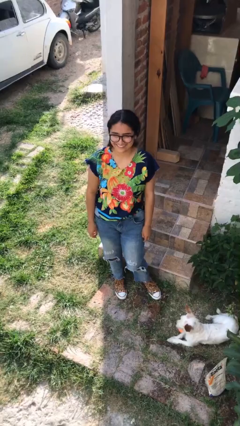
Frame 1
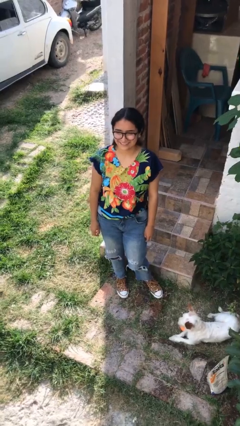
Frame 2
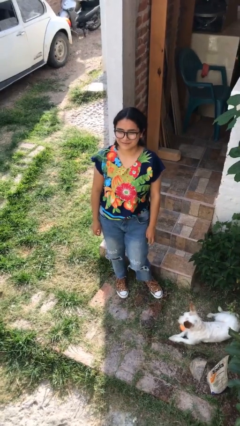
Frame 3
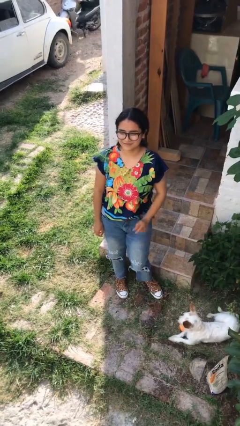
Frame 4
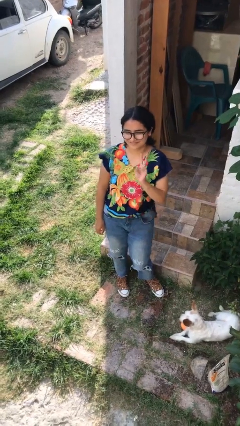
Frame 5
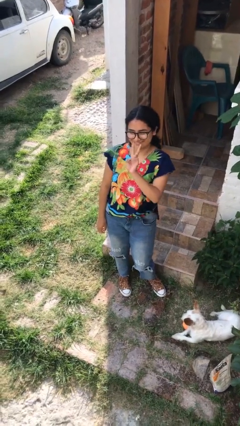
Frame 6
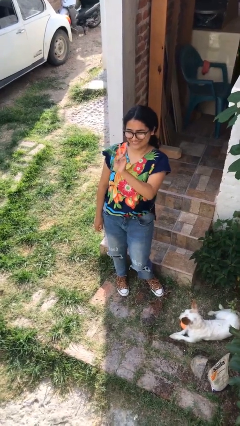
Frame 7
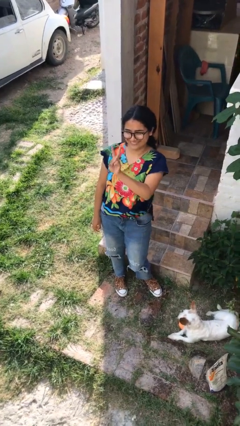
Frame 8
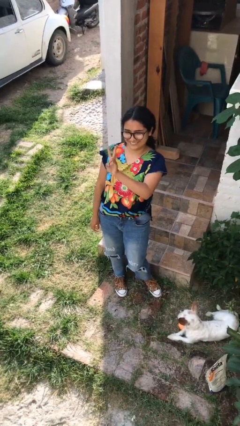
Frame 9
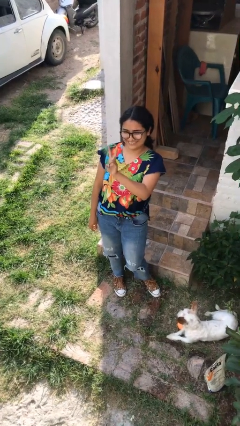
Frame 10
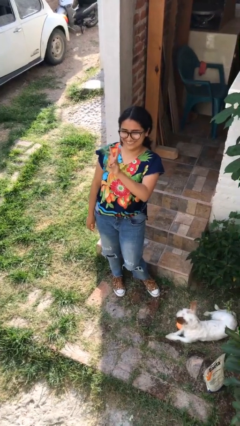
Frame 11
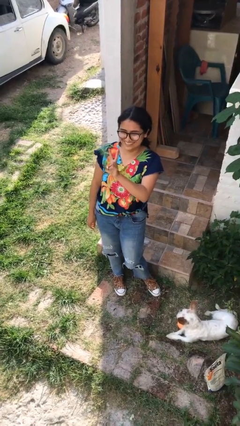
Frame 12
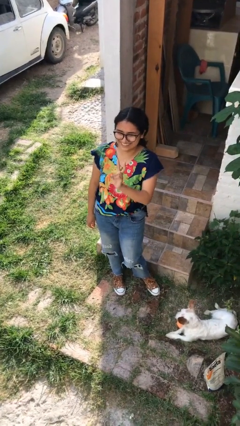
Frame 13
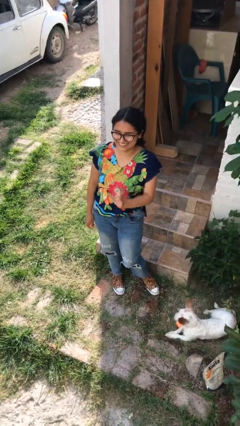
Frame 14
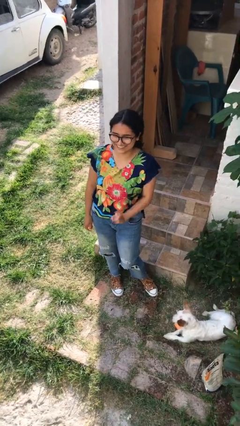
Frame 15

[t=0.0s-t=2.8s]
person gestures peace

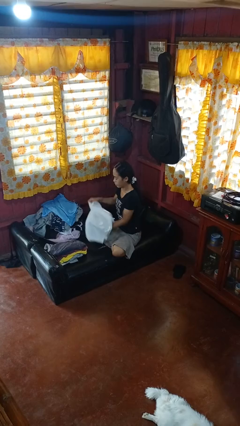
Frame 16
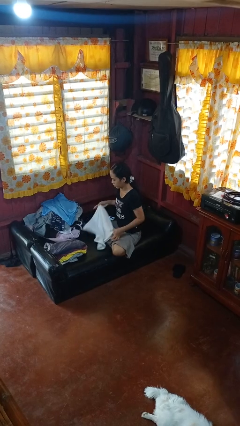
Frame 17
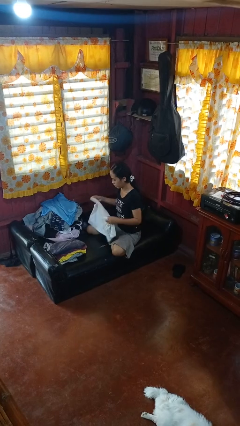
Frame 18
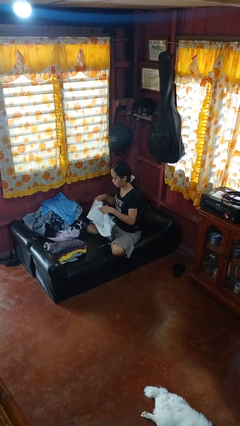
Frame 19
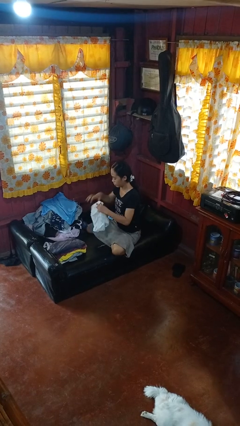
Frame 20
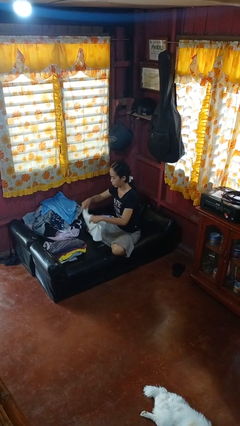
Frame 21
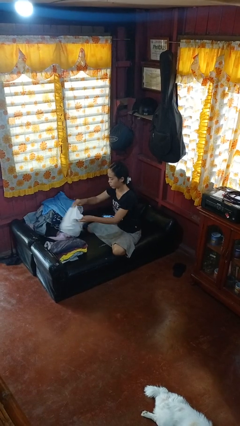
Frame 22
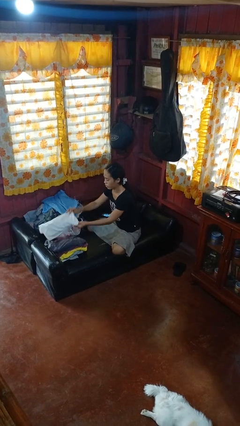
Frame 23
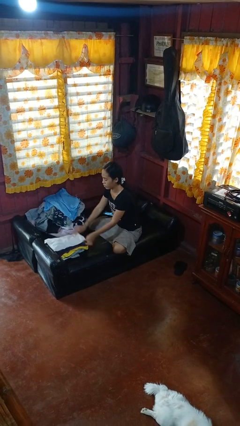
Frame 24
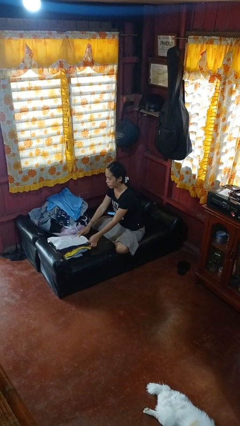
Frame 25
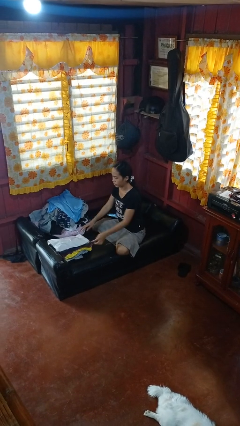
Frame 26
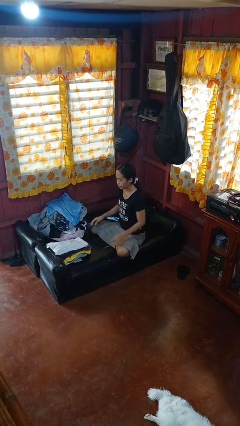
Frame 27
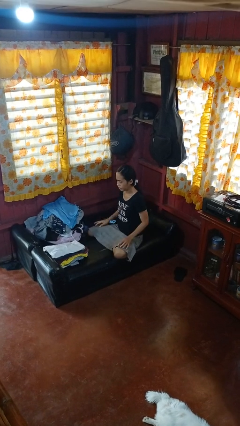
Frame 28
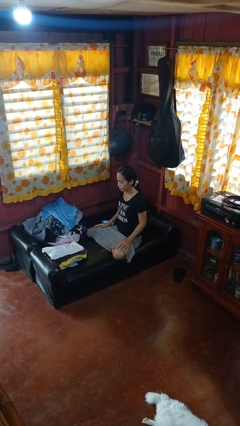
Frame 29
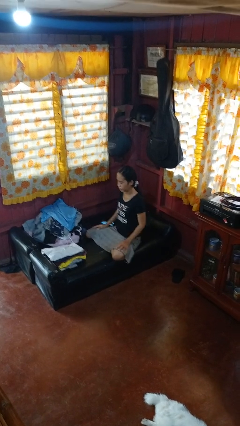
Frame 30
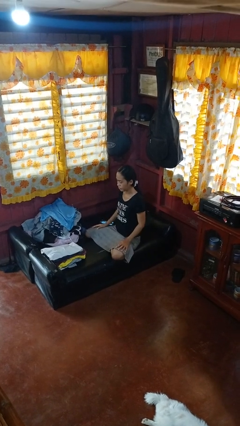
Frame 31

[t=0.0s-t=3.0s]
person folds shirt

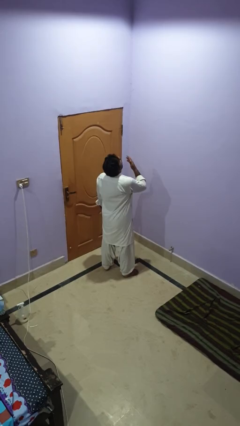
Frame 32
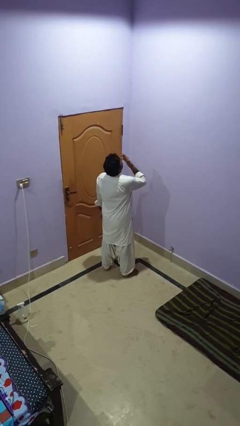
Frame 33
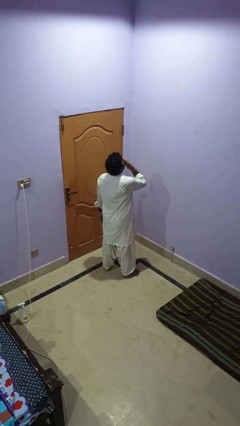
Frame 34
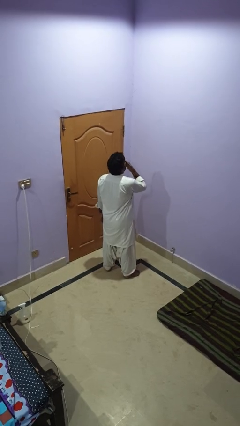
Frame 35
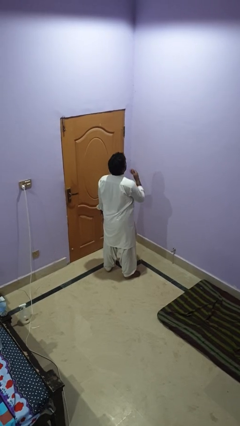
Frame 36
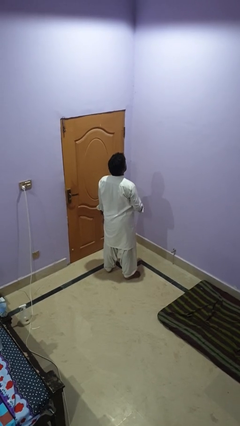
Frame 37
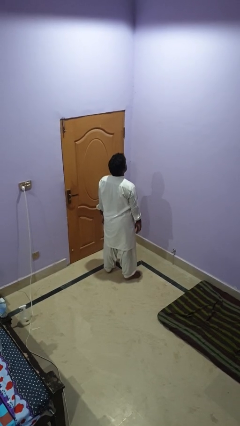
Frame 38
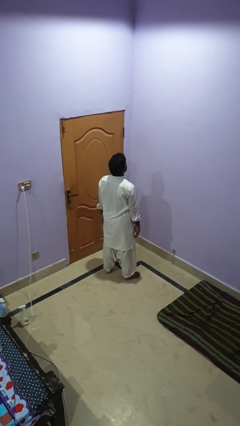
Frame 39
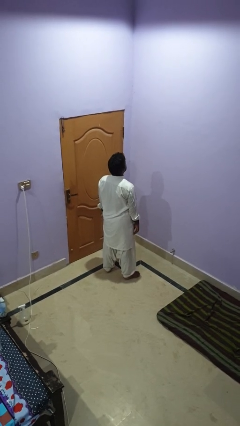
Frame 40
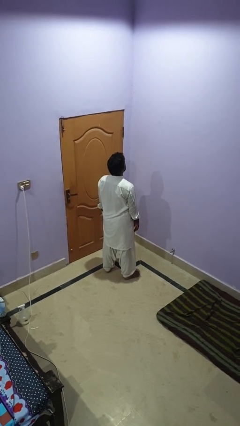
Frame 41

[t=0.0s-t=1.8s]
person yawns

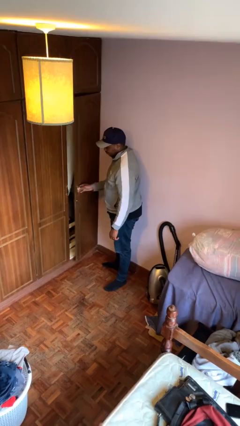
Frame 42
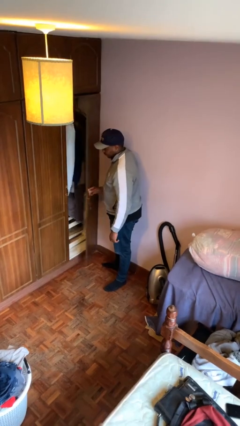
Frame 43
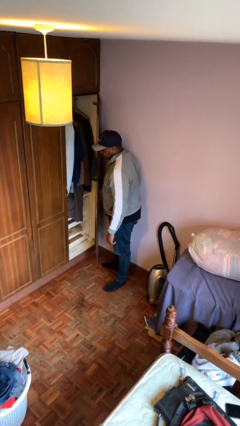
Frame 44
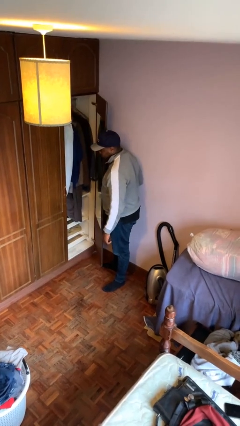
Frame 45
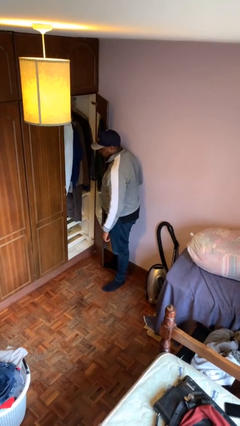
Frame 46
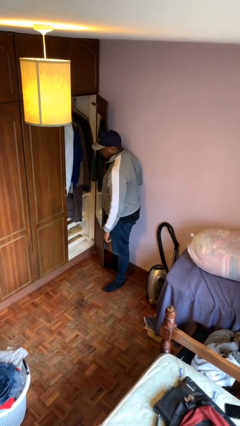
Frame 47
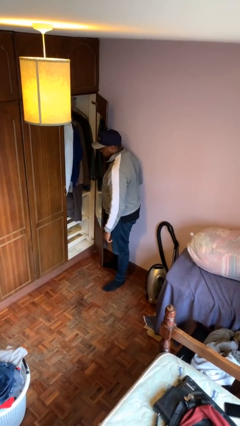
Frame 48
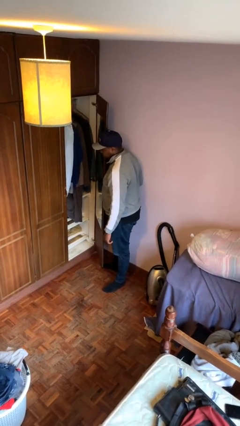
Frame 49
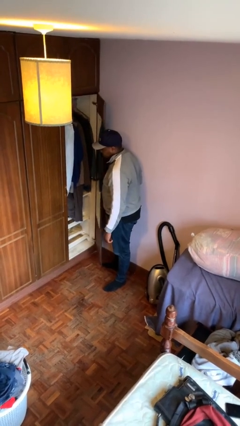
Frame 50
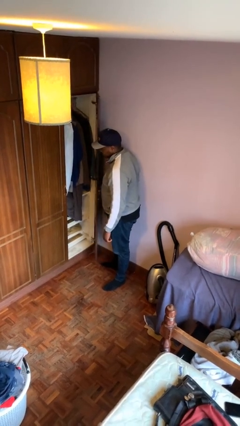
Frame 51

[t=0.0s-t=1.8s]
person opens closet door

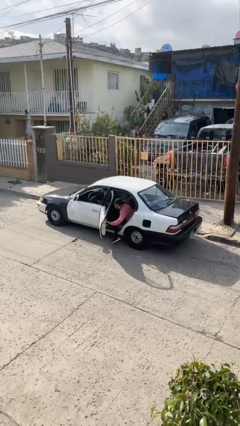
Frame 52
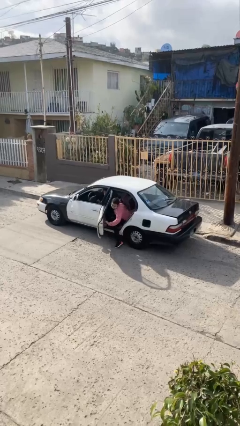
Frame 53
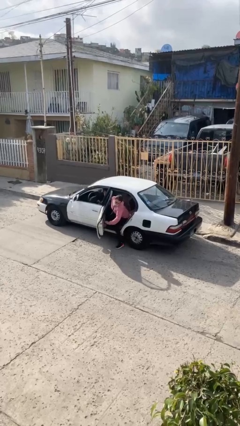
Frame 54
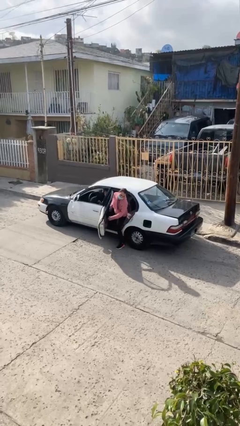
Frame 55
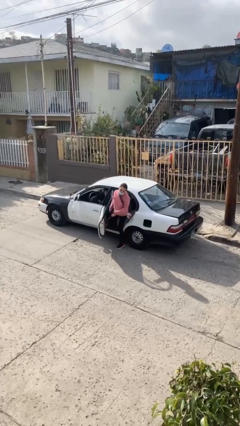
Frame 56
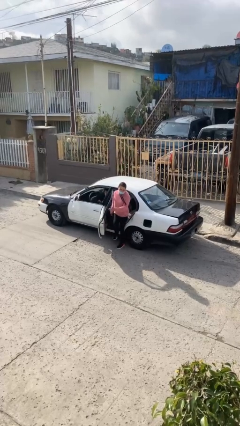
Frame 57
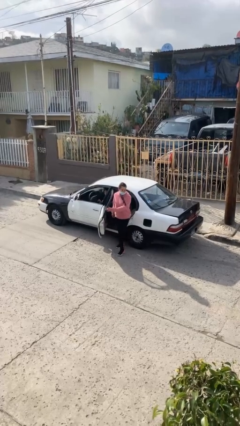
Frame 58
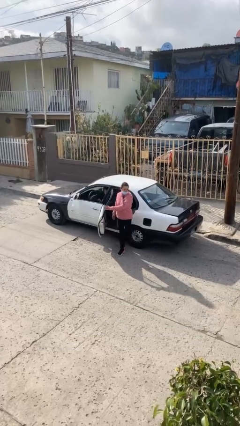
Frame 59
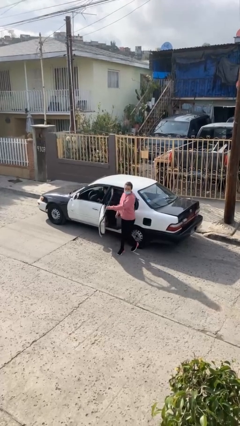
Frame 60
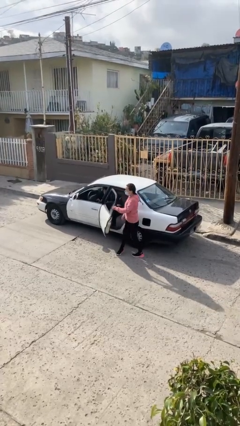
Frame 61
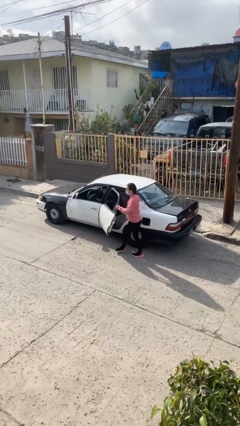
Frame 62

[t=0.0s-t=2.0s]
car drops off person

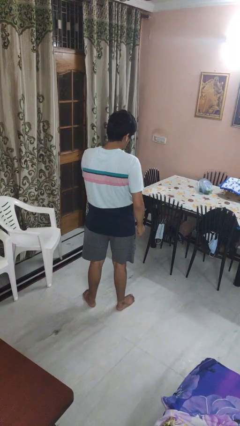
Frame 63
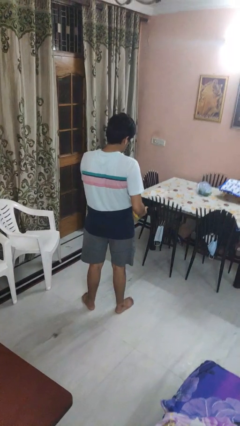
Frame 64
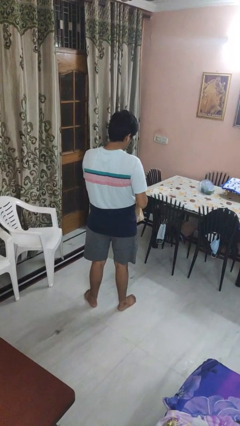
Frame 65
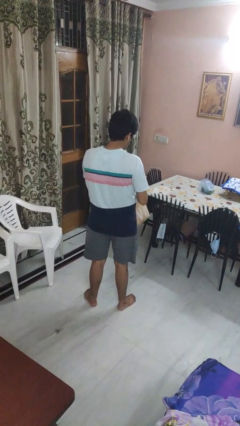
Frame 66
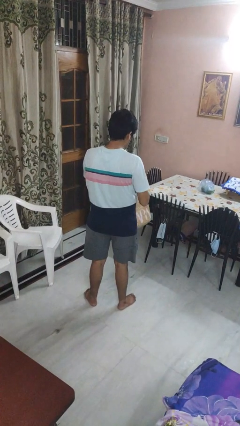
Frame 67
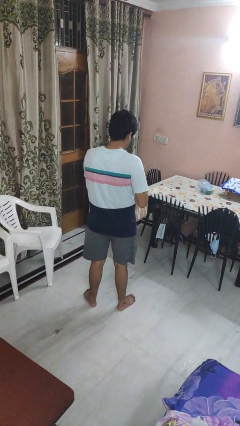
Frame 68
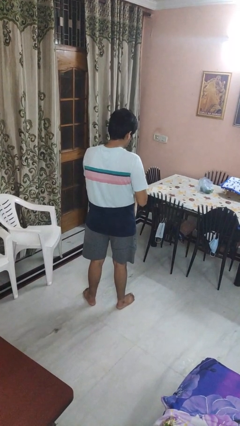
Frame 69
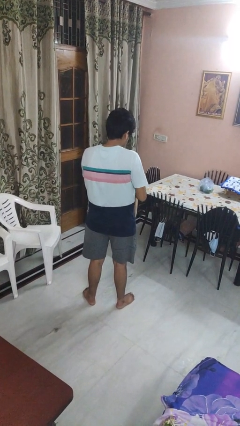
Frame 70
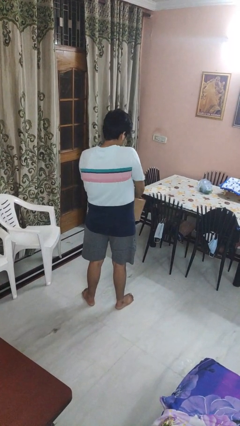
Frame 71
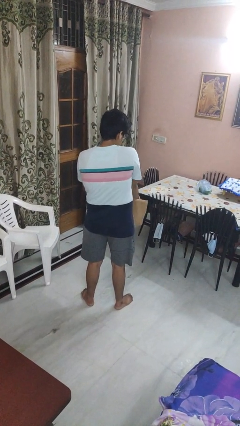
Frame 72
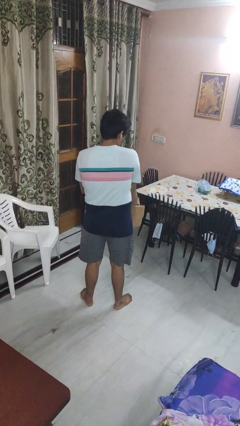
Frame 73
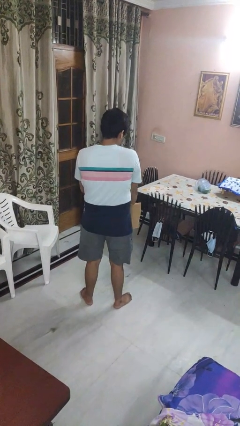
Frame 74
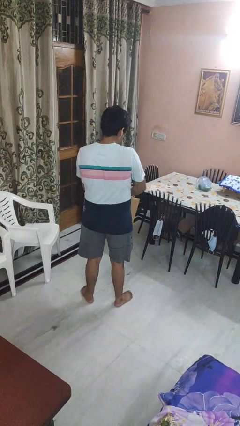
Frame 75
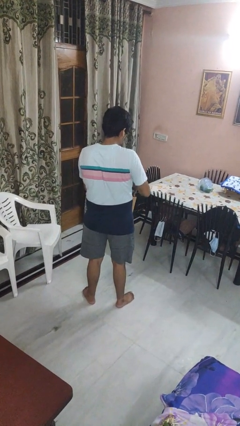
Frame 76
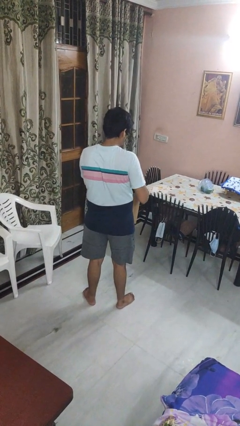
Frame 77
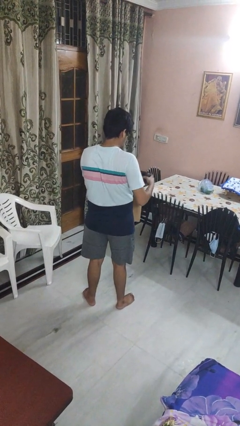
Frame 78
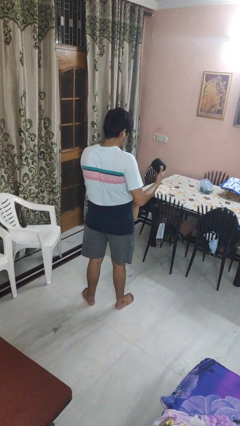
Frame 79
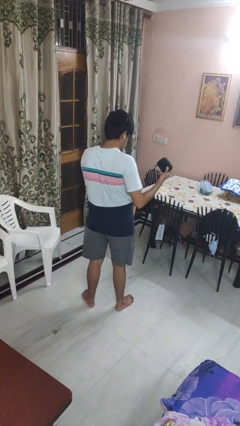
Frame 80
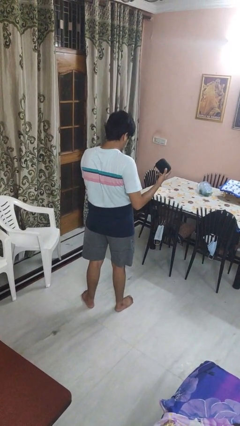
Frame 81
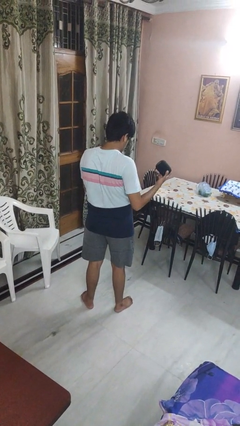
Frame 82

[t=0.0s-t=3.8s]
person takes object from bag

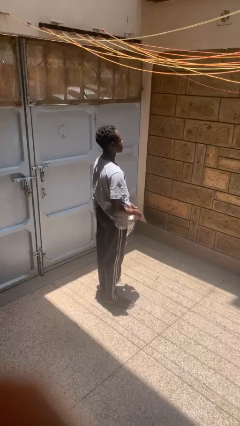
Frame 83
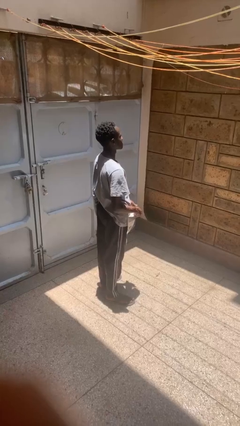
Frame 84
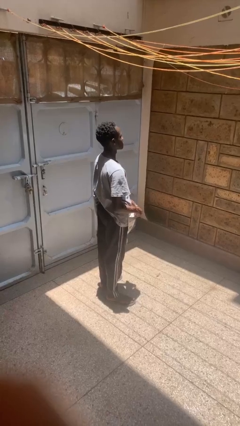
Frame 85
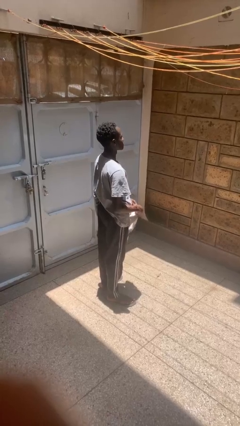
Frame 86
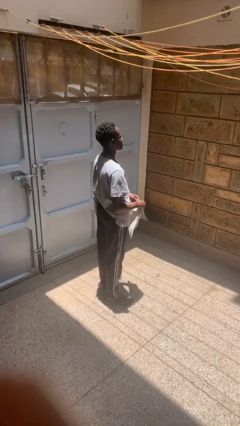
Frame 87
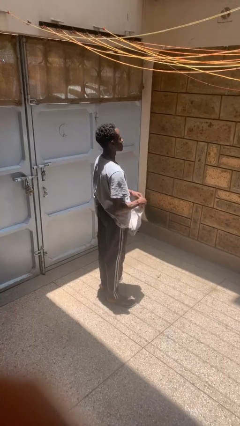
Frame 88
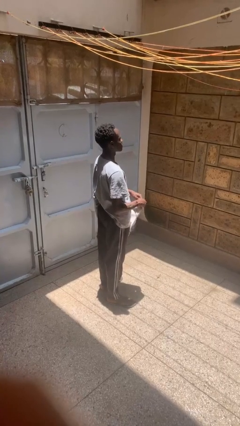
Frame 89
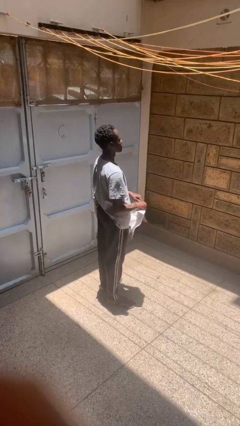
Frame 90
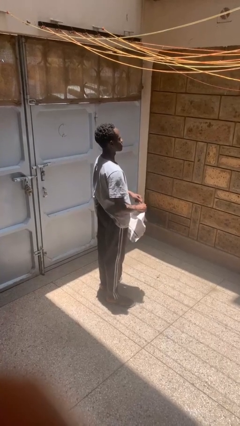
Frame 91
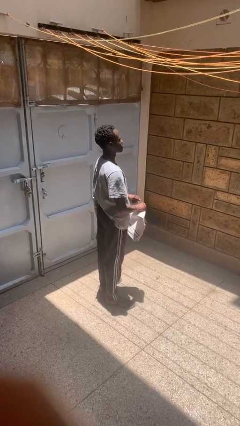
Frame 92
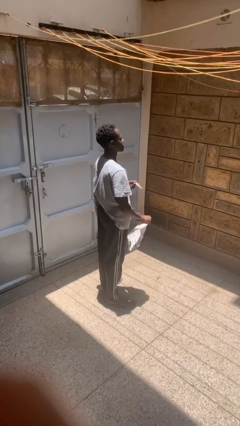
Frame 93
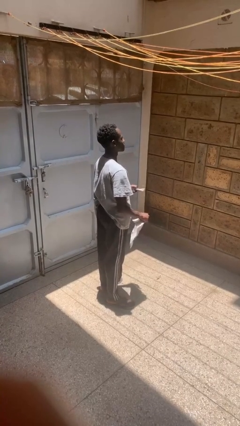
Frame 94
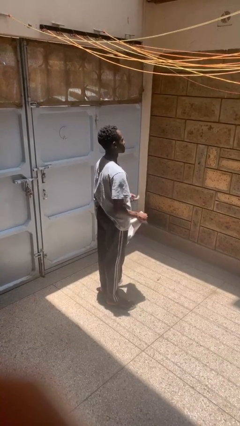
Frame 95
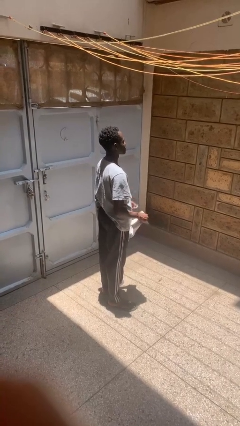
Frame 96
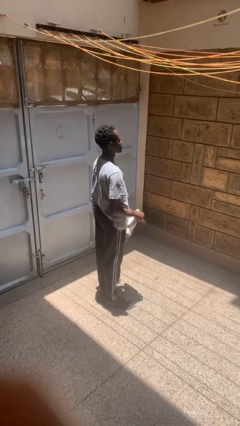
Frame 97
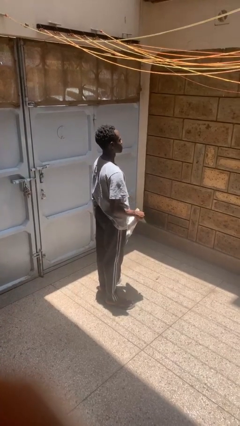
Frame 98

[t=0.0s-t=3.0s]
person tears paper
